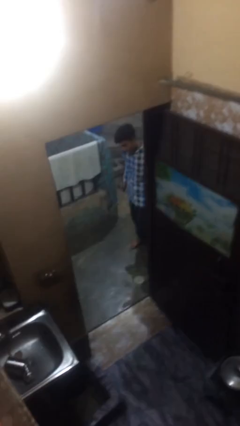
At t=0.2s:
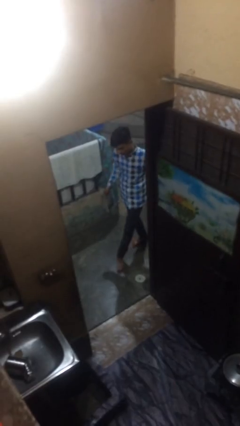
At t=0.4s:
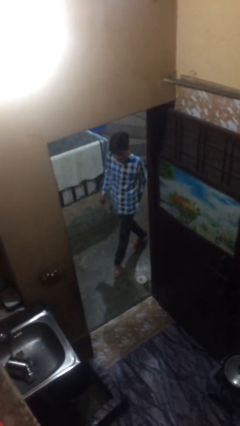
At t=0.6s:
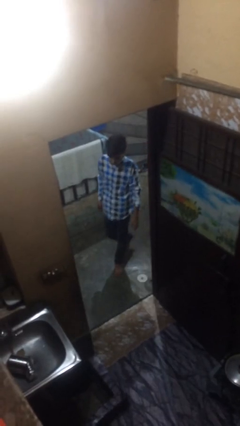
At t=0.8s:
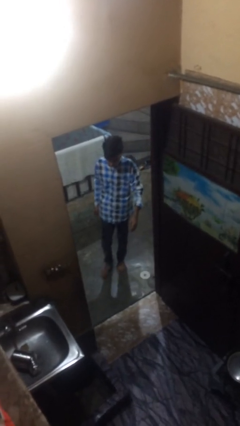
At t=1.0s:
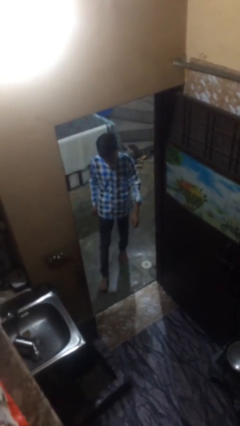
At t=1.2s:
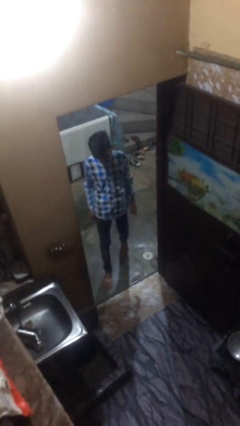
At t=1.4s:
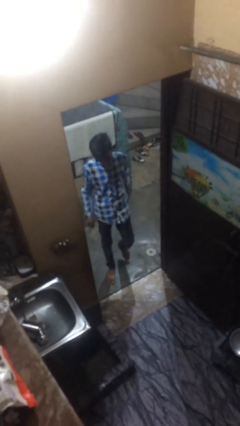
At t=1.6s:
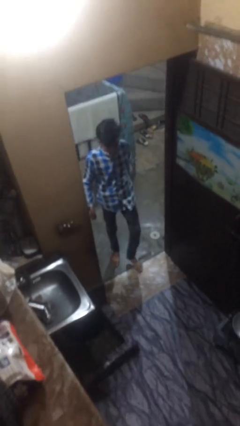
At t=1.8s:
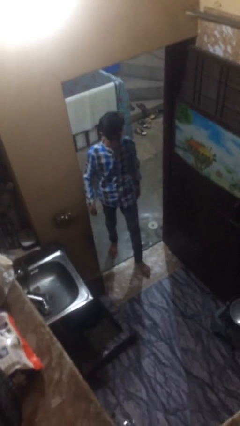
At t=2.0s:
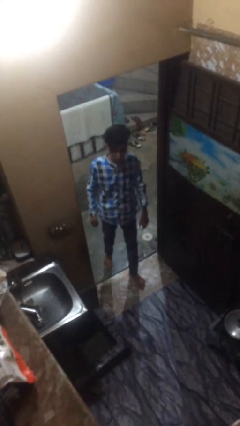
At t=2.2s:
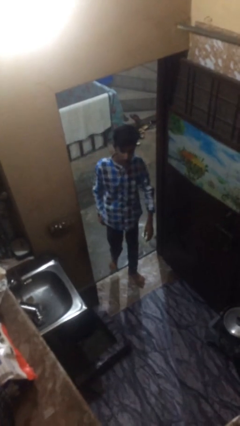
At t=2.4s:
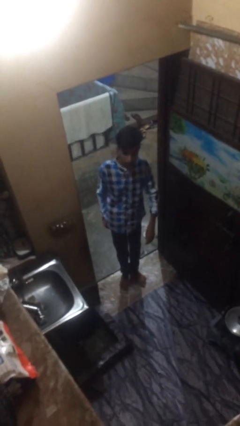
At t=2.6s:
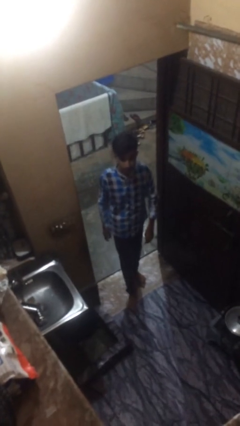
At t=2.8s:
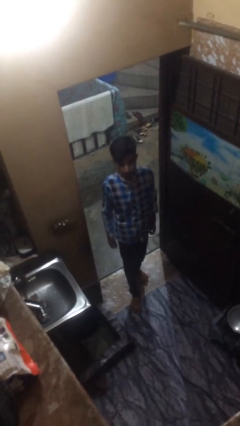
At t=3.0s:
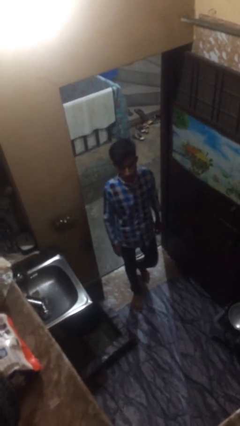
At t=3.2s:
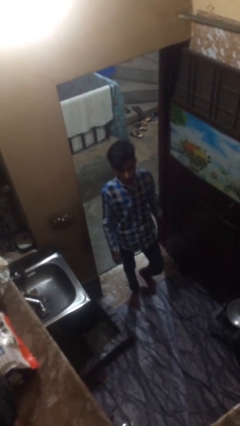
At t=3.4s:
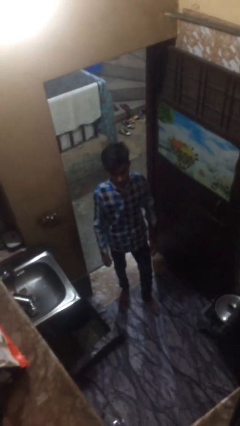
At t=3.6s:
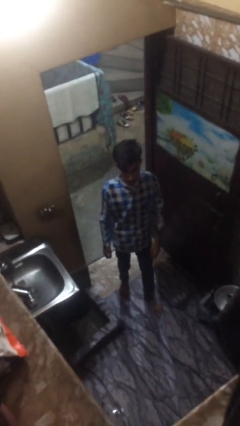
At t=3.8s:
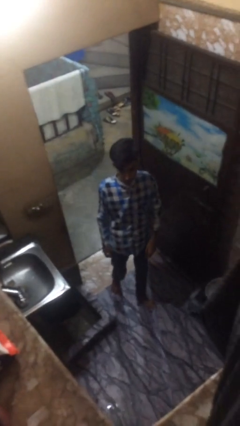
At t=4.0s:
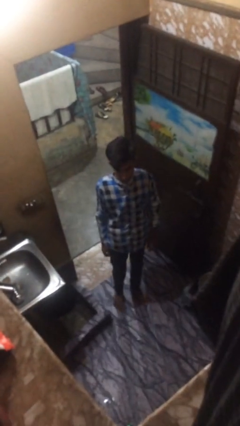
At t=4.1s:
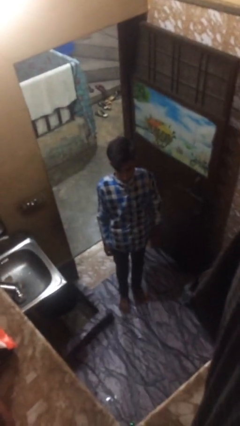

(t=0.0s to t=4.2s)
person enters scene through structure

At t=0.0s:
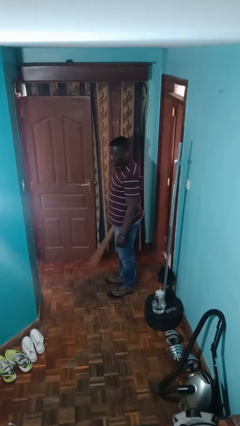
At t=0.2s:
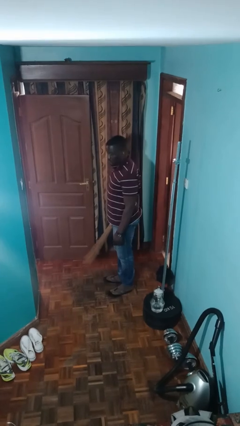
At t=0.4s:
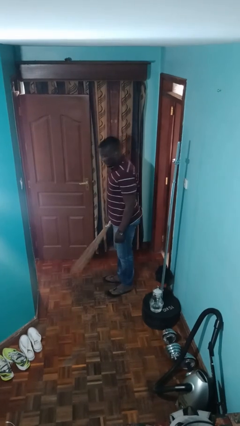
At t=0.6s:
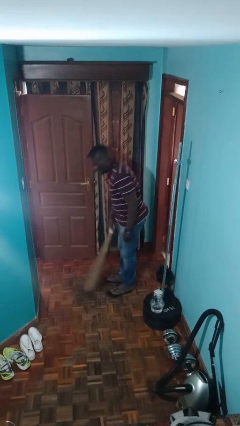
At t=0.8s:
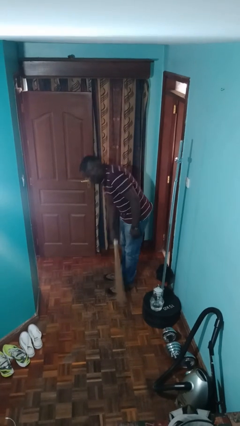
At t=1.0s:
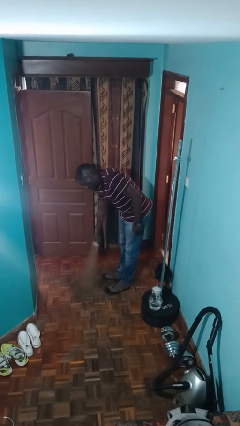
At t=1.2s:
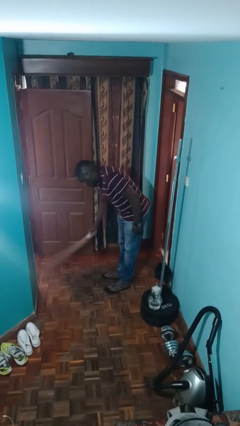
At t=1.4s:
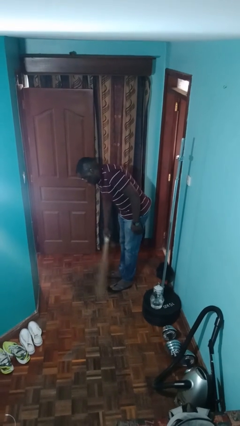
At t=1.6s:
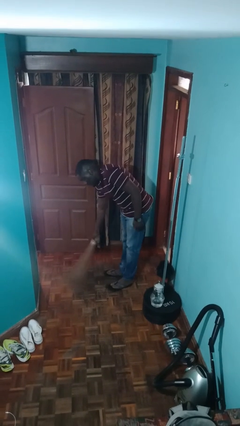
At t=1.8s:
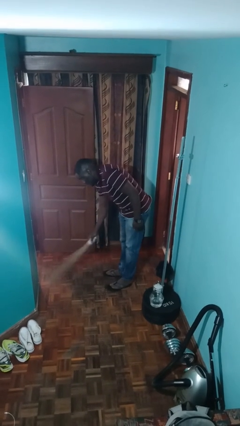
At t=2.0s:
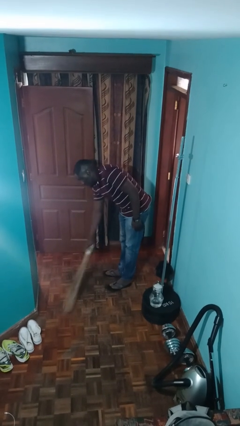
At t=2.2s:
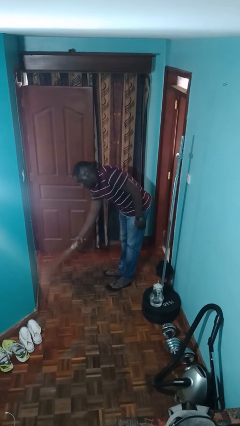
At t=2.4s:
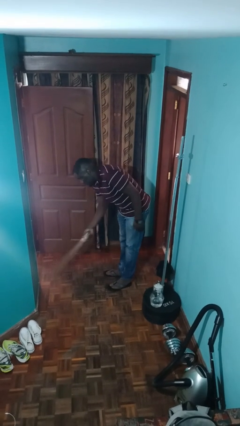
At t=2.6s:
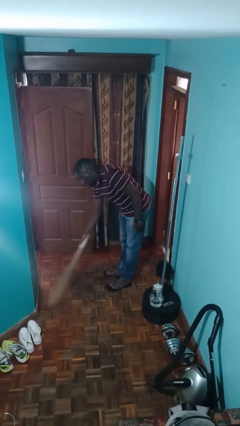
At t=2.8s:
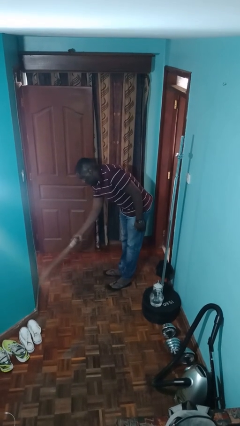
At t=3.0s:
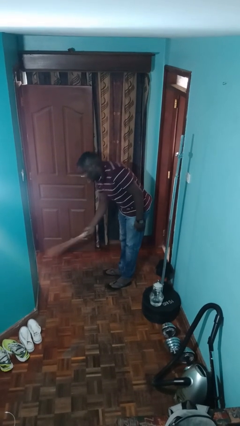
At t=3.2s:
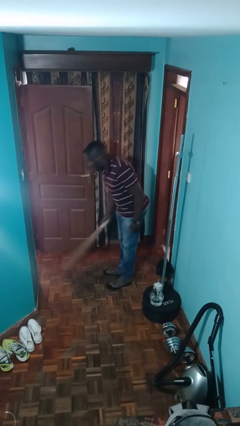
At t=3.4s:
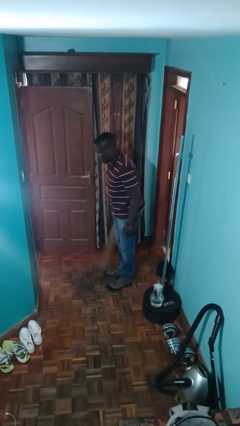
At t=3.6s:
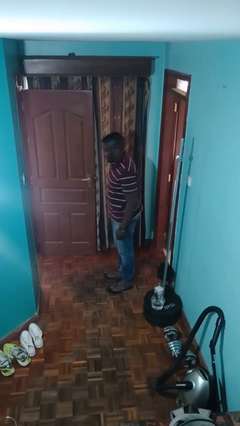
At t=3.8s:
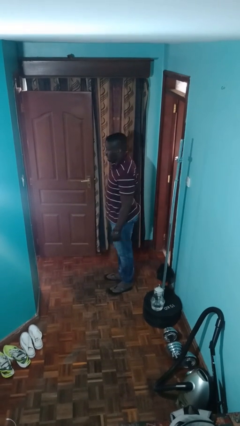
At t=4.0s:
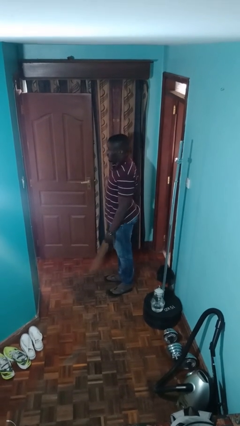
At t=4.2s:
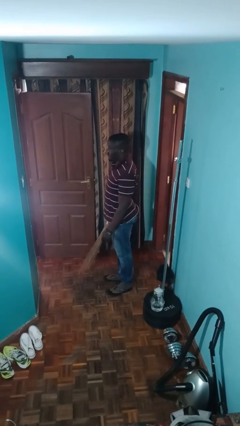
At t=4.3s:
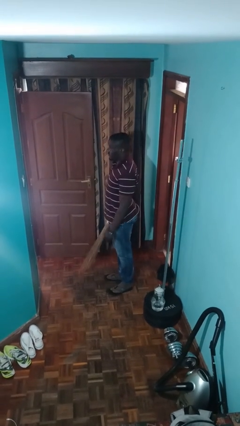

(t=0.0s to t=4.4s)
person sweeps floor

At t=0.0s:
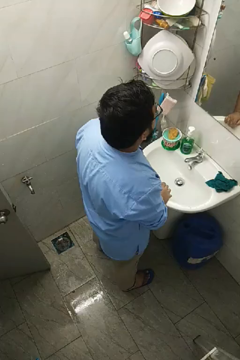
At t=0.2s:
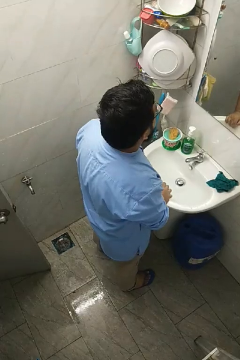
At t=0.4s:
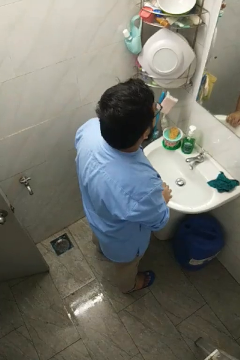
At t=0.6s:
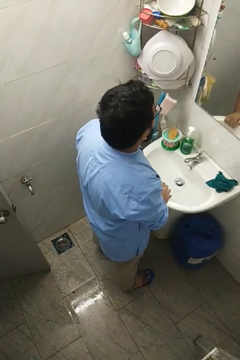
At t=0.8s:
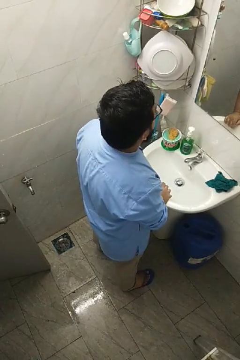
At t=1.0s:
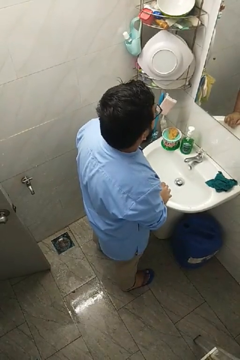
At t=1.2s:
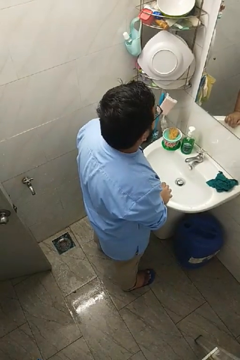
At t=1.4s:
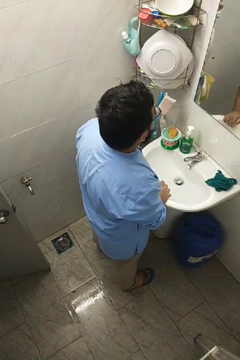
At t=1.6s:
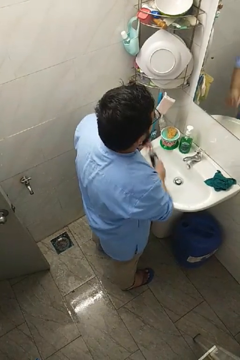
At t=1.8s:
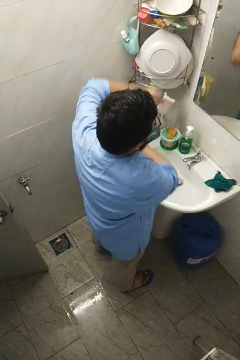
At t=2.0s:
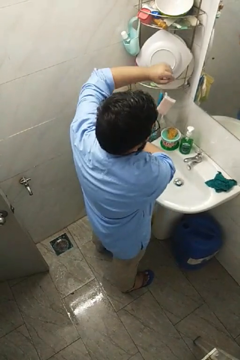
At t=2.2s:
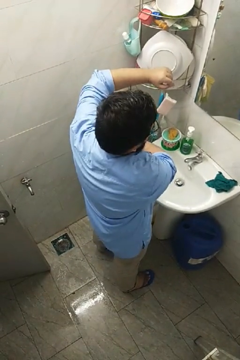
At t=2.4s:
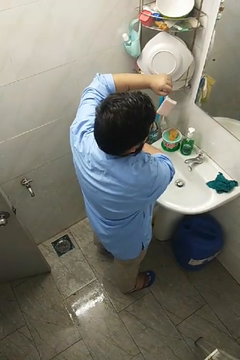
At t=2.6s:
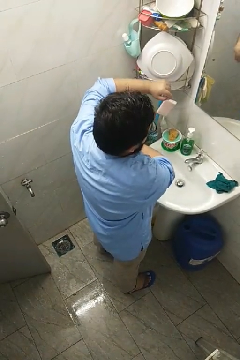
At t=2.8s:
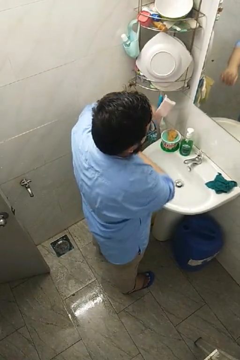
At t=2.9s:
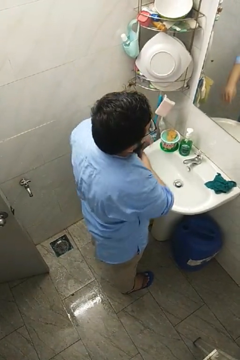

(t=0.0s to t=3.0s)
person applies deodorant

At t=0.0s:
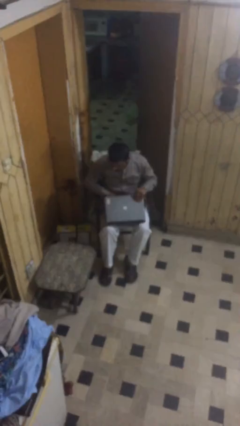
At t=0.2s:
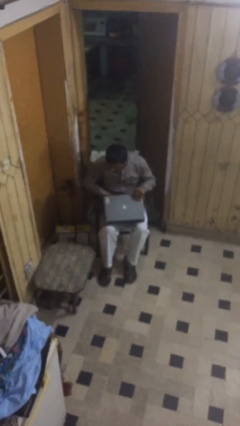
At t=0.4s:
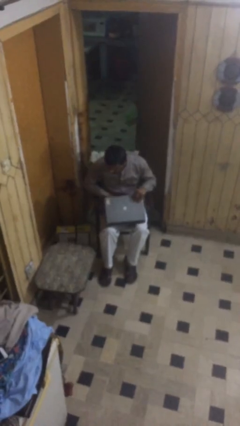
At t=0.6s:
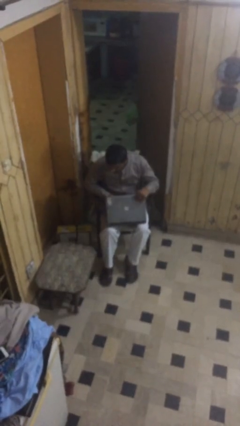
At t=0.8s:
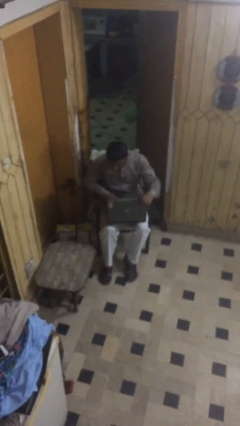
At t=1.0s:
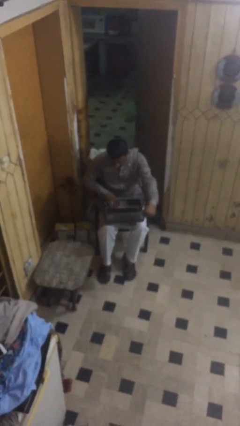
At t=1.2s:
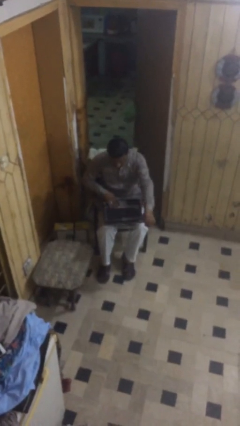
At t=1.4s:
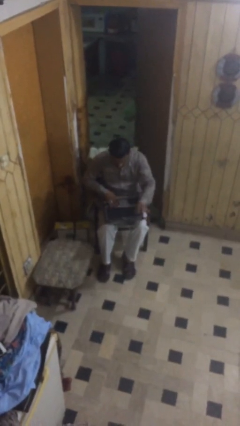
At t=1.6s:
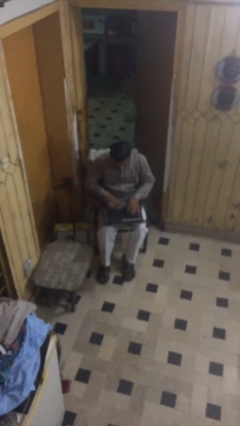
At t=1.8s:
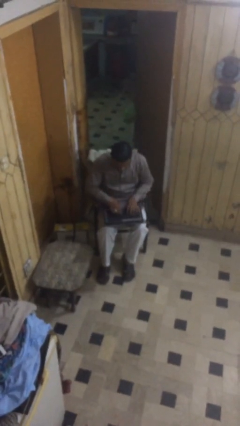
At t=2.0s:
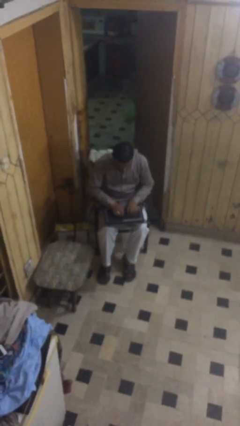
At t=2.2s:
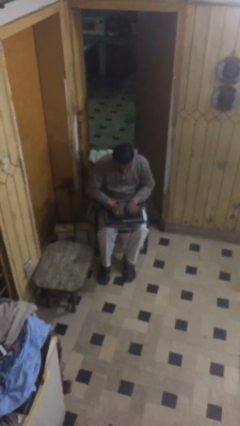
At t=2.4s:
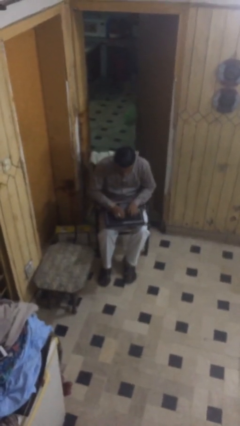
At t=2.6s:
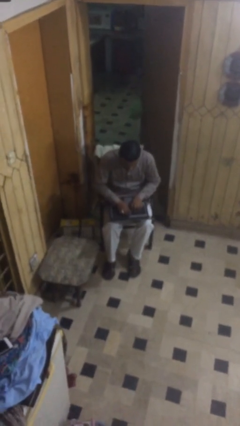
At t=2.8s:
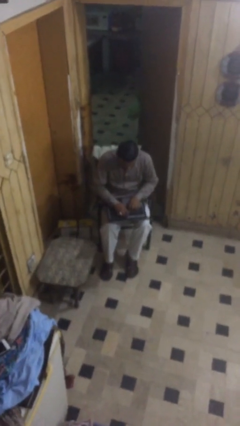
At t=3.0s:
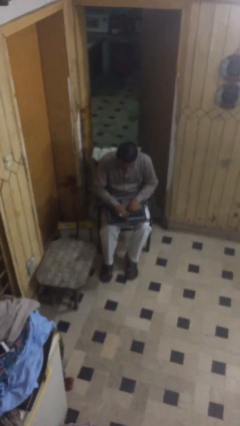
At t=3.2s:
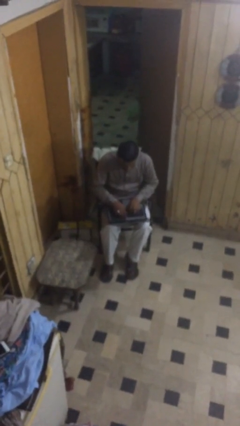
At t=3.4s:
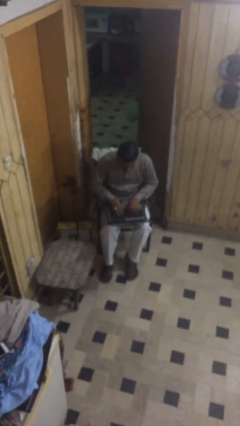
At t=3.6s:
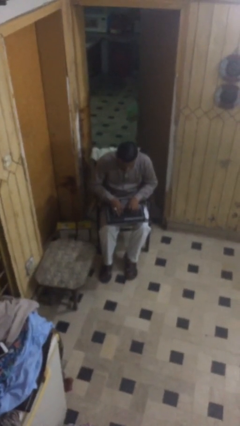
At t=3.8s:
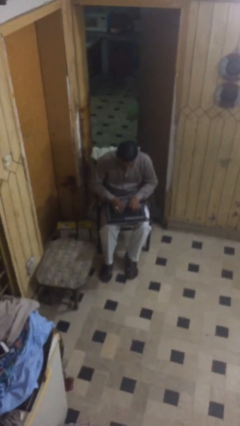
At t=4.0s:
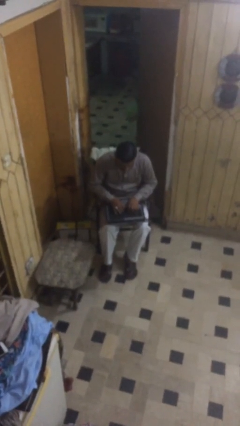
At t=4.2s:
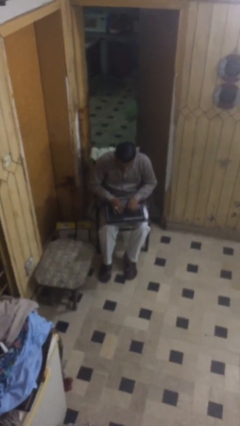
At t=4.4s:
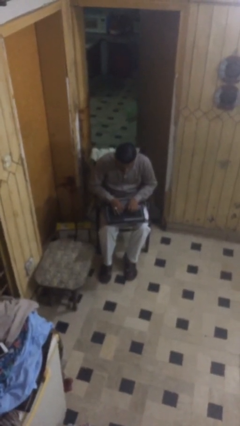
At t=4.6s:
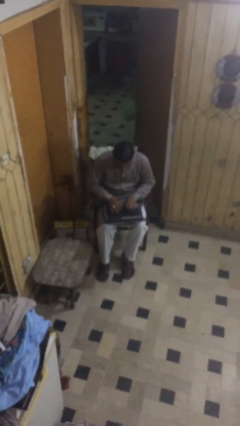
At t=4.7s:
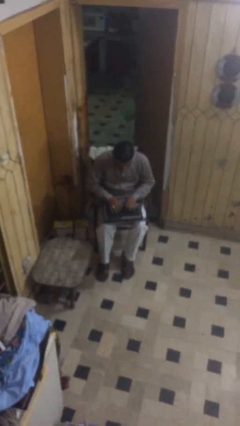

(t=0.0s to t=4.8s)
person interacts with laptop

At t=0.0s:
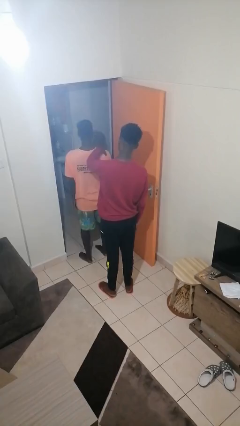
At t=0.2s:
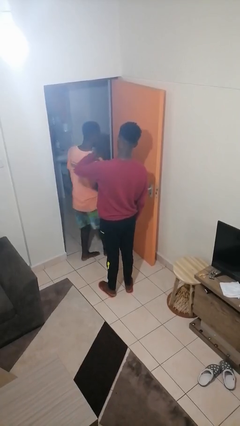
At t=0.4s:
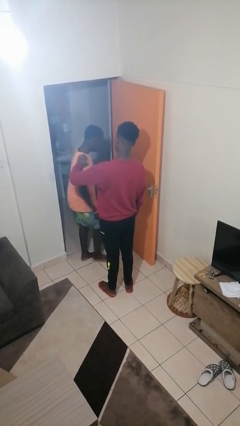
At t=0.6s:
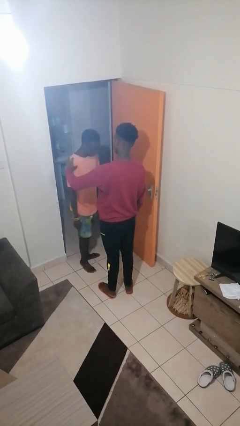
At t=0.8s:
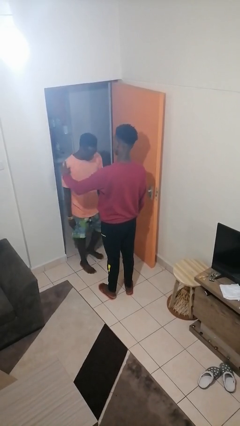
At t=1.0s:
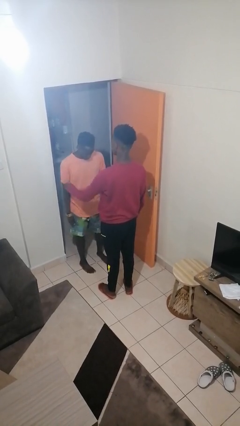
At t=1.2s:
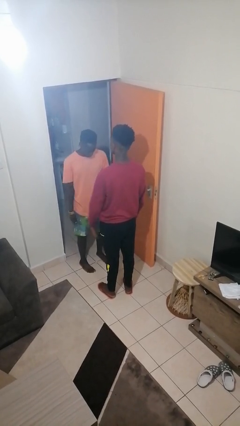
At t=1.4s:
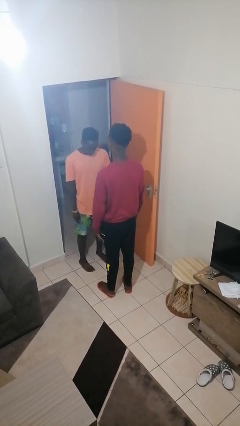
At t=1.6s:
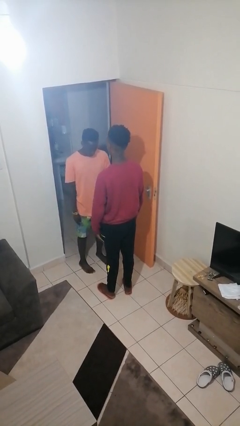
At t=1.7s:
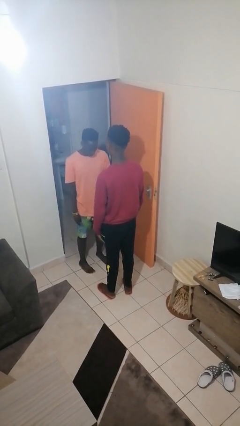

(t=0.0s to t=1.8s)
person spins person around
